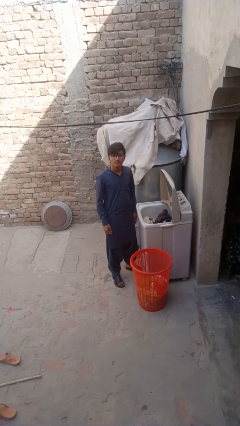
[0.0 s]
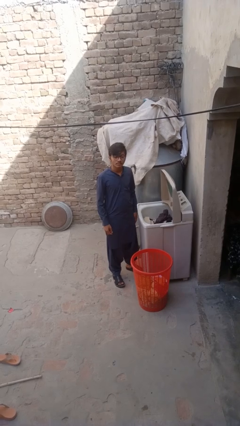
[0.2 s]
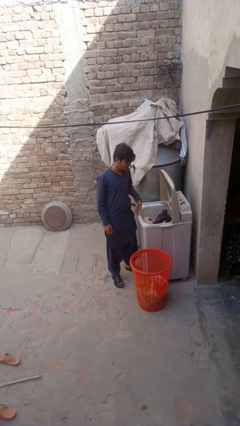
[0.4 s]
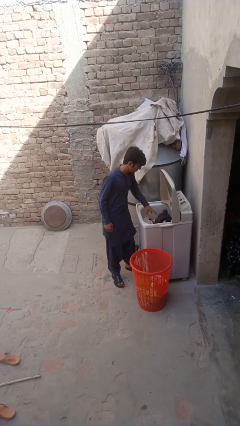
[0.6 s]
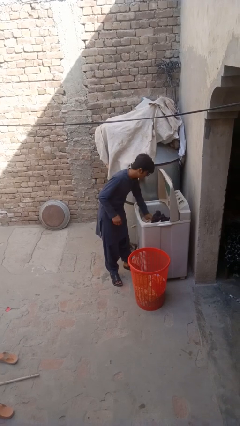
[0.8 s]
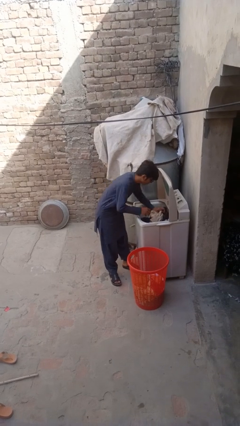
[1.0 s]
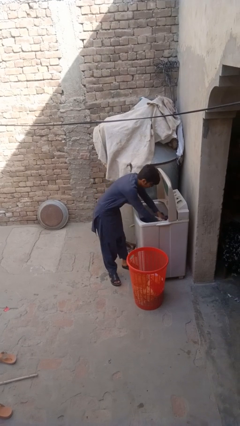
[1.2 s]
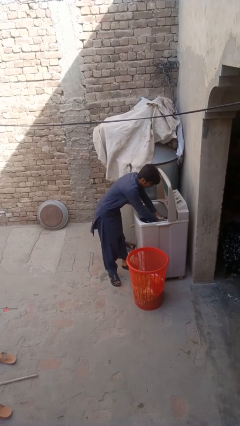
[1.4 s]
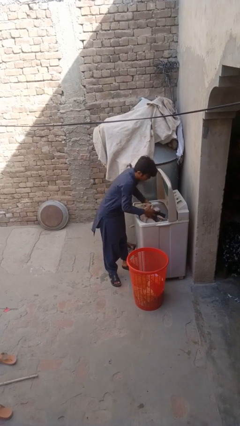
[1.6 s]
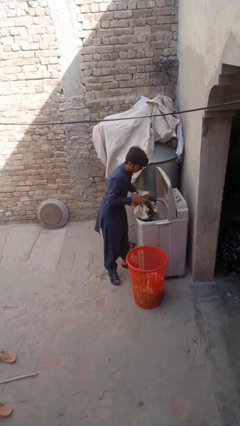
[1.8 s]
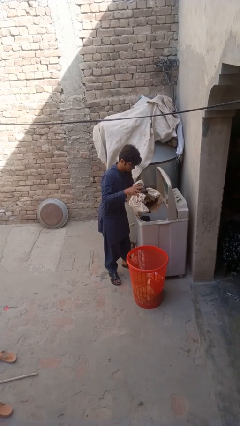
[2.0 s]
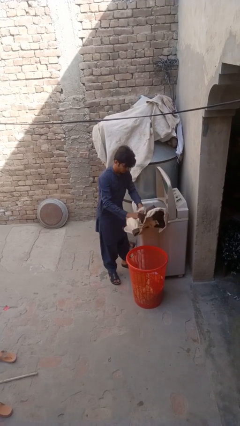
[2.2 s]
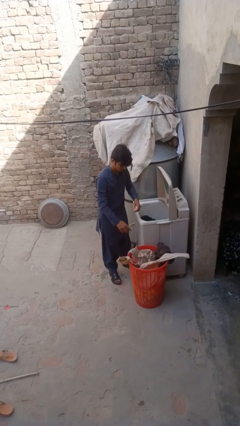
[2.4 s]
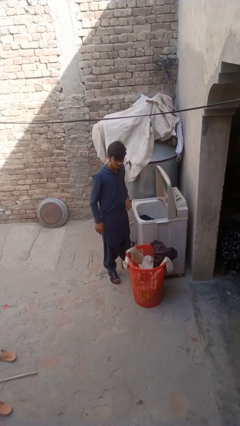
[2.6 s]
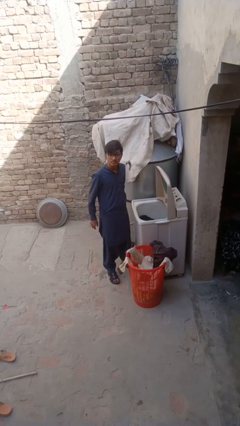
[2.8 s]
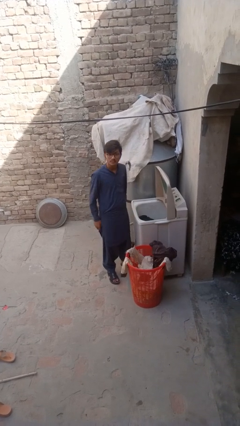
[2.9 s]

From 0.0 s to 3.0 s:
person unloads clotheswasher

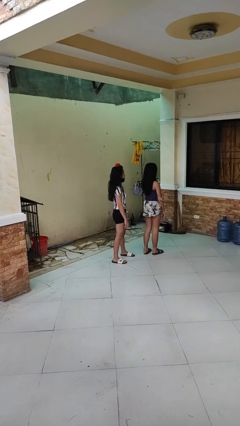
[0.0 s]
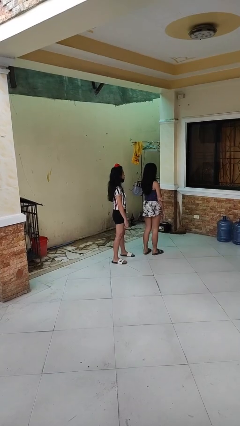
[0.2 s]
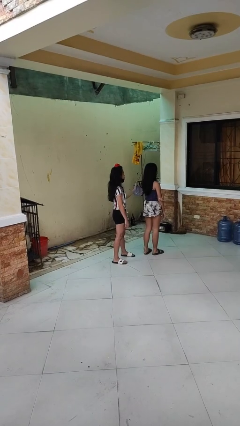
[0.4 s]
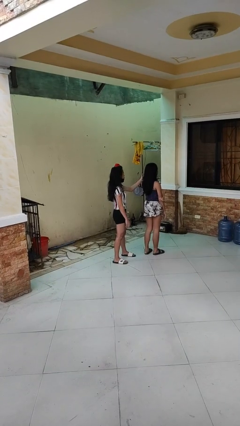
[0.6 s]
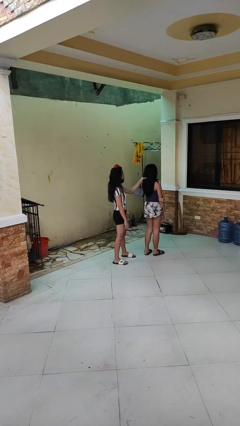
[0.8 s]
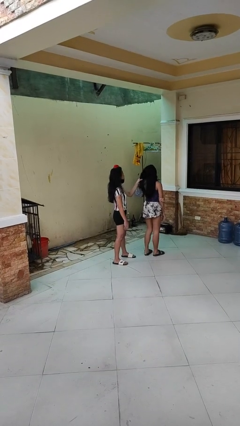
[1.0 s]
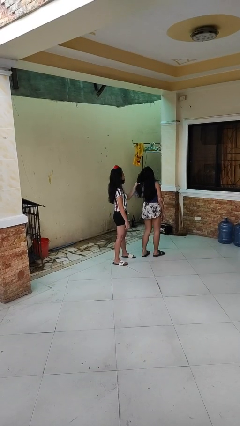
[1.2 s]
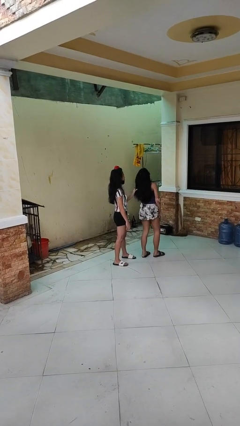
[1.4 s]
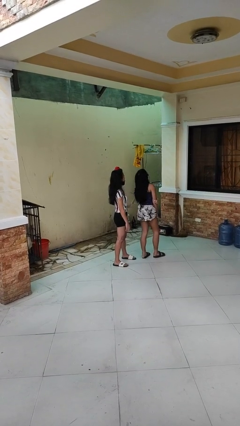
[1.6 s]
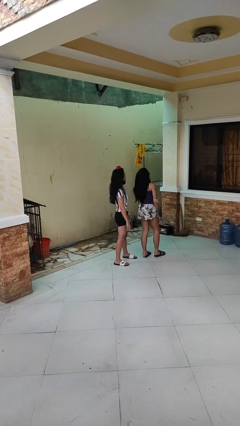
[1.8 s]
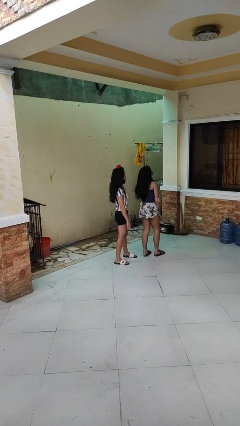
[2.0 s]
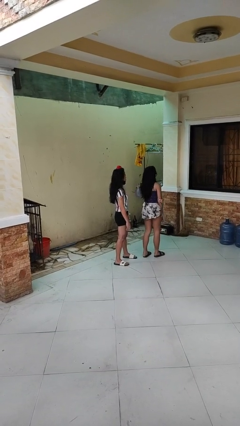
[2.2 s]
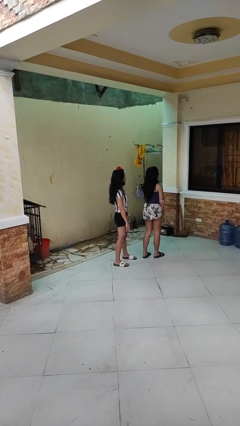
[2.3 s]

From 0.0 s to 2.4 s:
person grabs person by hair

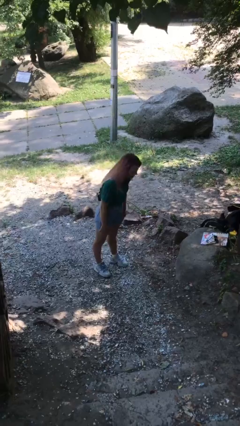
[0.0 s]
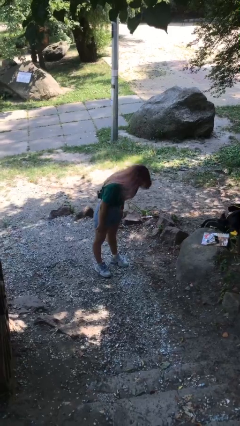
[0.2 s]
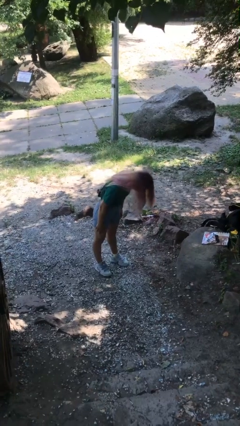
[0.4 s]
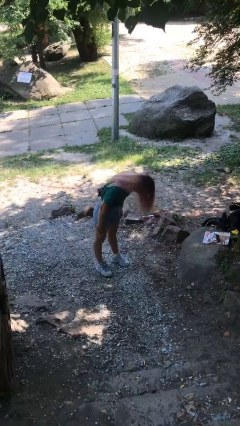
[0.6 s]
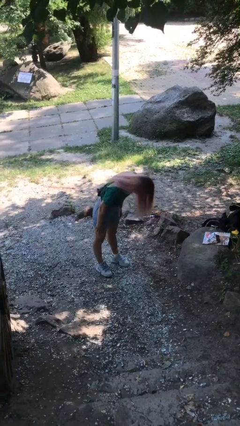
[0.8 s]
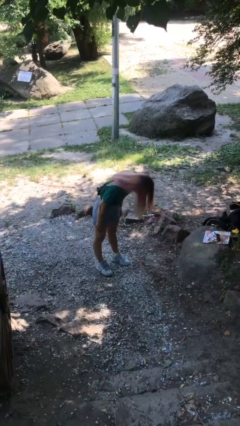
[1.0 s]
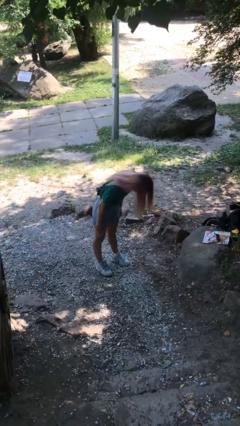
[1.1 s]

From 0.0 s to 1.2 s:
person bows

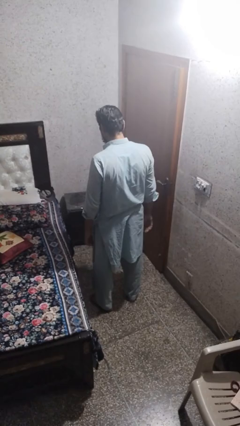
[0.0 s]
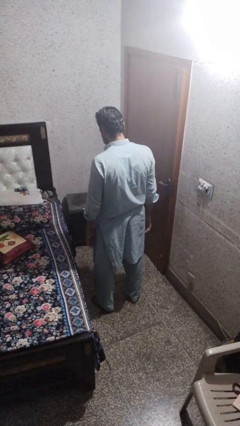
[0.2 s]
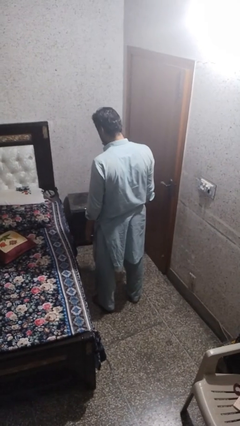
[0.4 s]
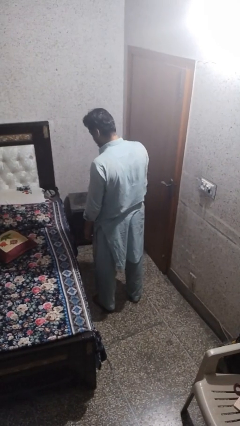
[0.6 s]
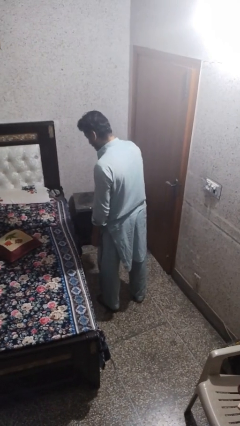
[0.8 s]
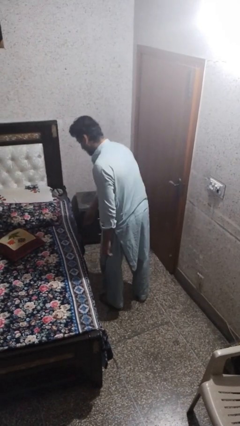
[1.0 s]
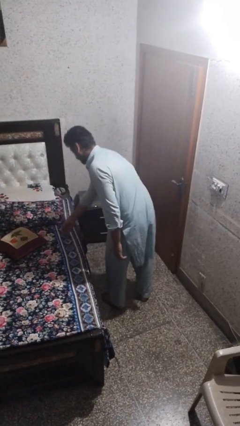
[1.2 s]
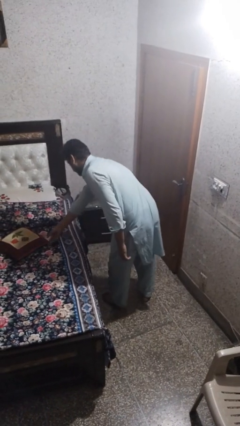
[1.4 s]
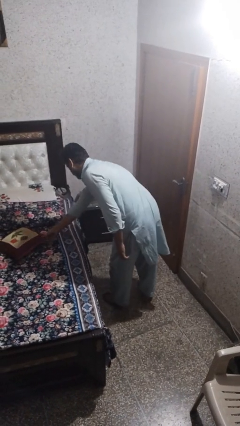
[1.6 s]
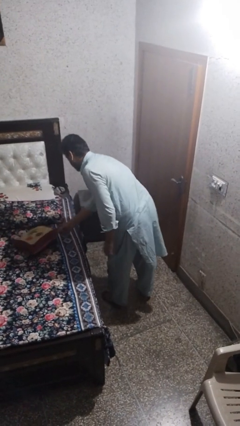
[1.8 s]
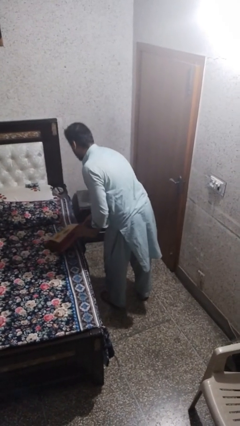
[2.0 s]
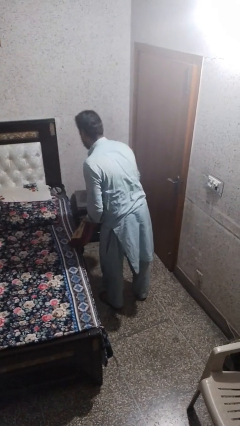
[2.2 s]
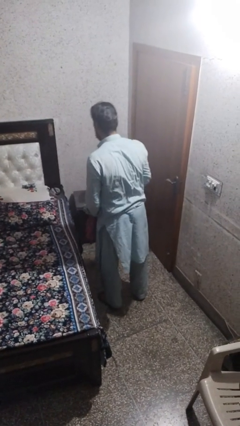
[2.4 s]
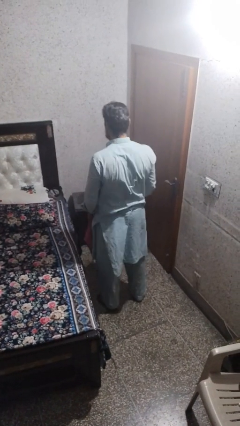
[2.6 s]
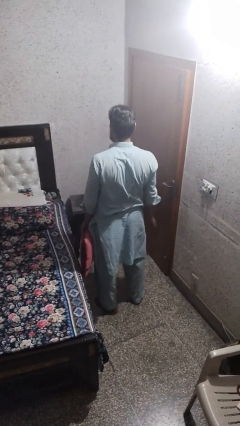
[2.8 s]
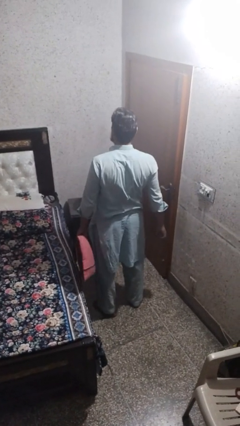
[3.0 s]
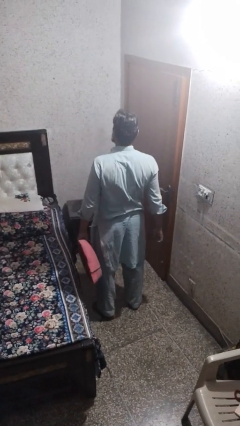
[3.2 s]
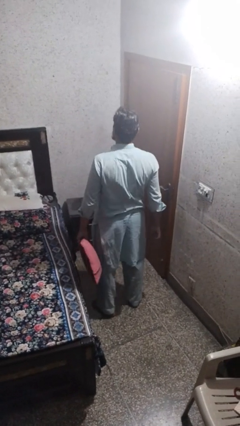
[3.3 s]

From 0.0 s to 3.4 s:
person picks up object from bed

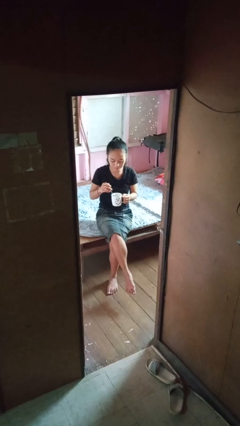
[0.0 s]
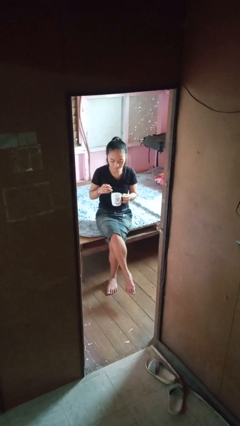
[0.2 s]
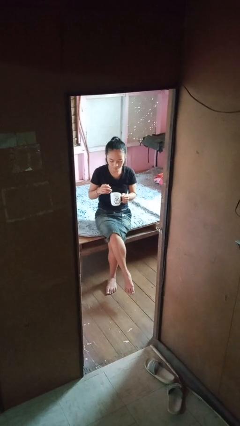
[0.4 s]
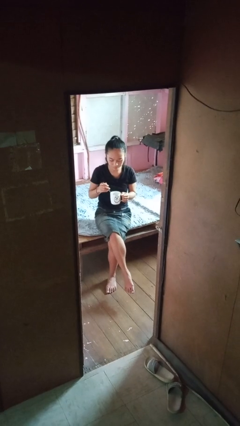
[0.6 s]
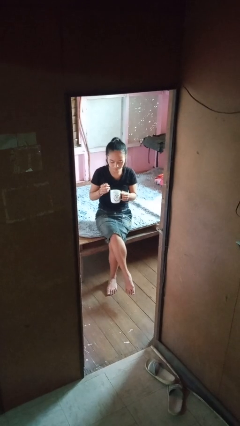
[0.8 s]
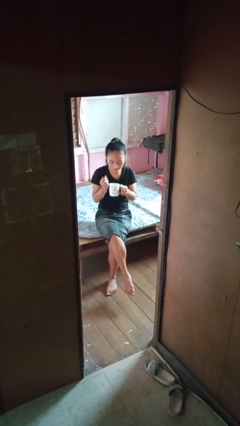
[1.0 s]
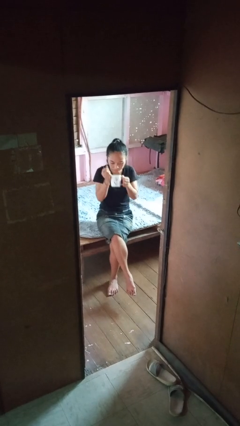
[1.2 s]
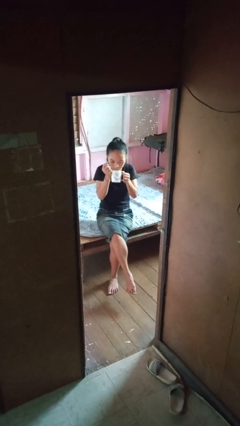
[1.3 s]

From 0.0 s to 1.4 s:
person stirs mug

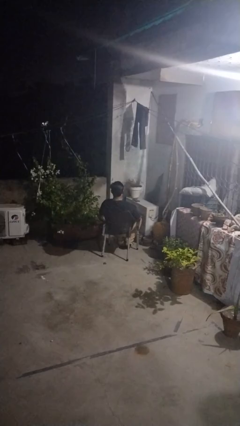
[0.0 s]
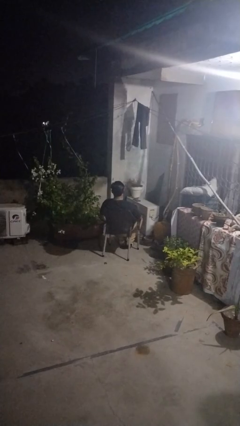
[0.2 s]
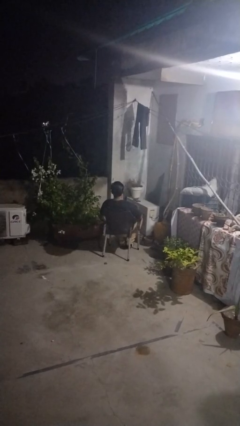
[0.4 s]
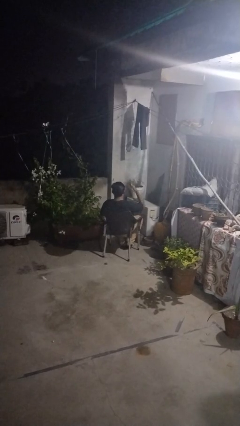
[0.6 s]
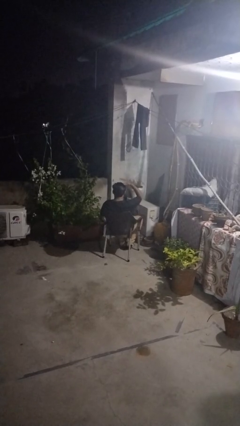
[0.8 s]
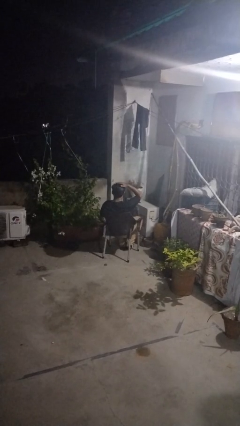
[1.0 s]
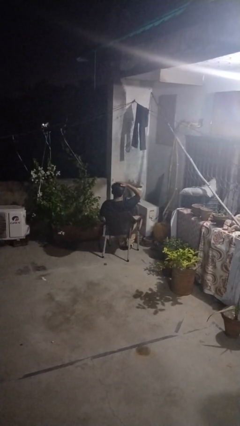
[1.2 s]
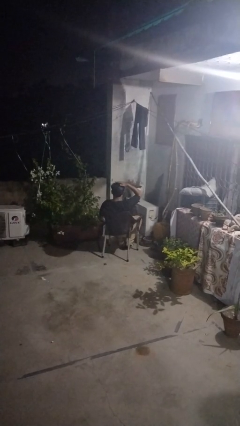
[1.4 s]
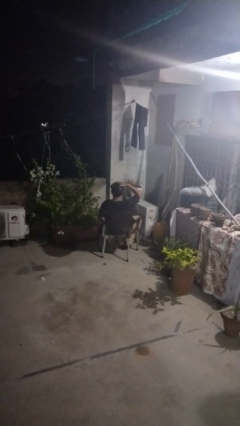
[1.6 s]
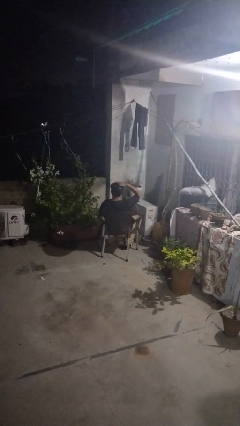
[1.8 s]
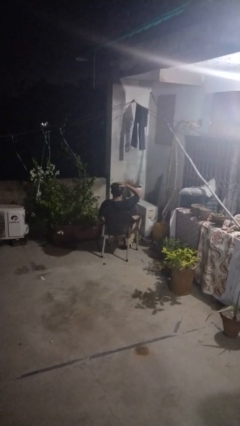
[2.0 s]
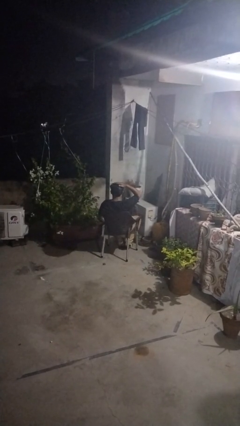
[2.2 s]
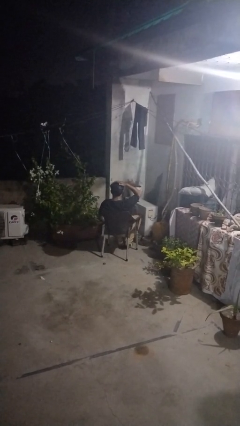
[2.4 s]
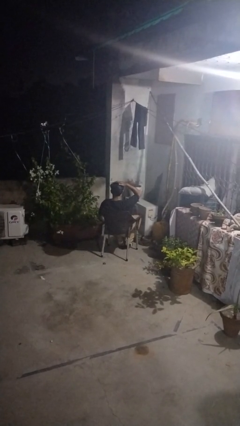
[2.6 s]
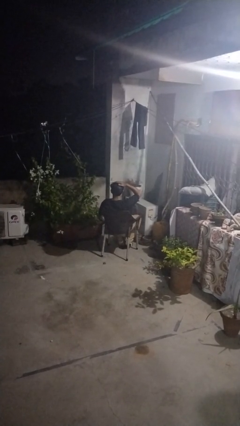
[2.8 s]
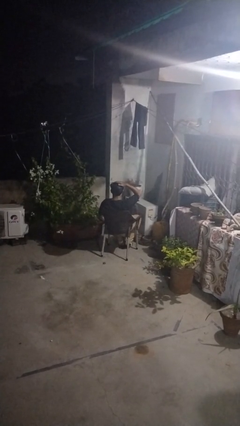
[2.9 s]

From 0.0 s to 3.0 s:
person pats head

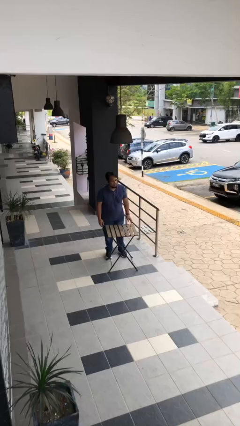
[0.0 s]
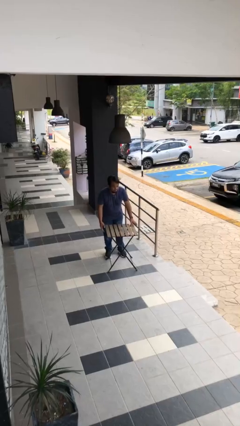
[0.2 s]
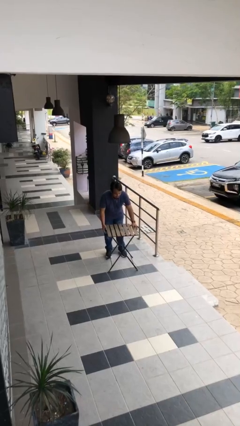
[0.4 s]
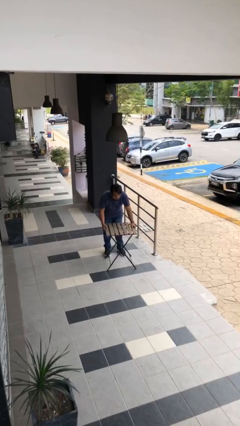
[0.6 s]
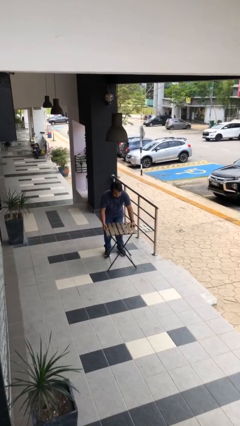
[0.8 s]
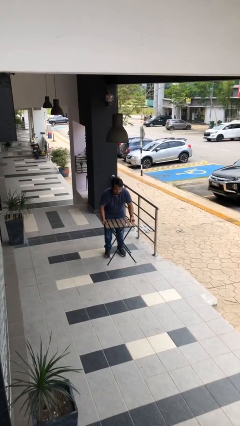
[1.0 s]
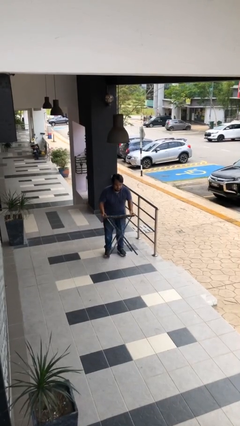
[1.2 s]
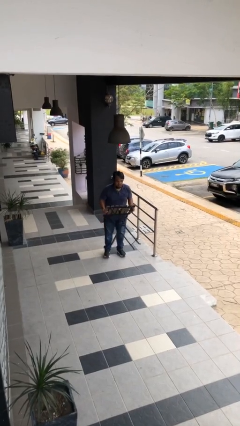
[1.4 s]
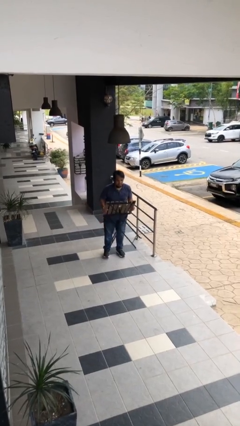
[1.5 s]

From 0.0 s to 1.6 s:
person picks up object from floor

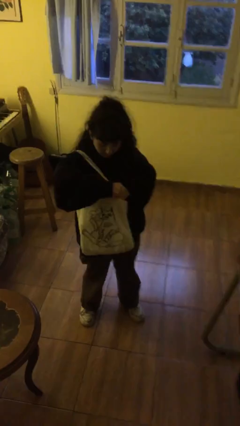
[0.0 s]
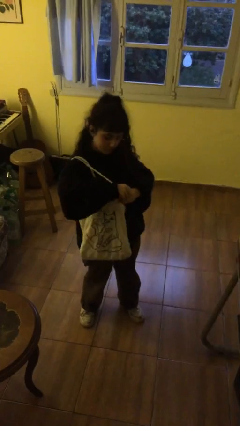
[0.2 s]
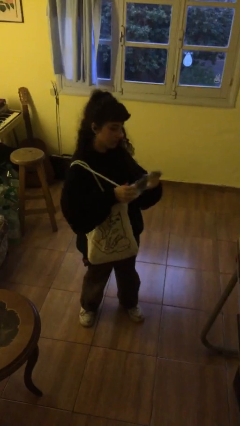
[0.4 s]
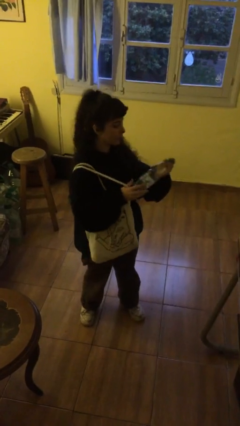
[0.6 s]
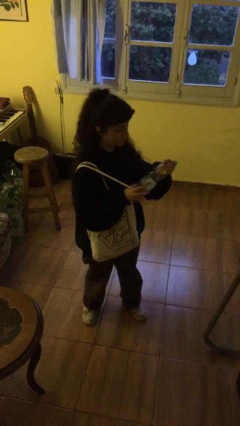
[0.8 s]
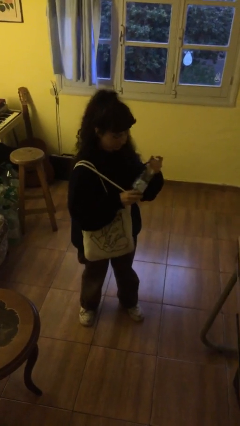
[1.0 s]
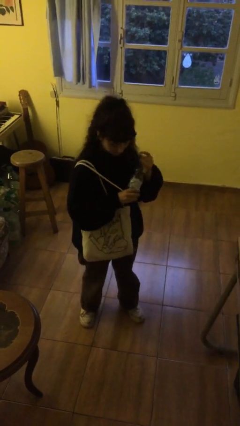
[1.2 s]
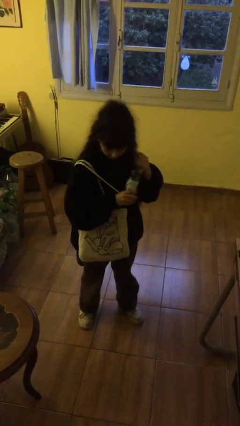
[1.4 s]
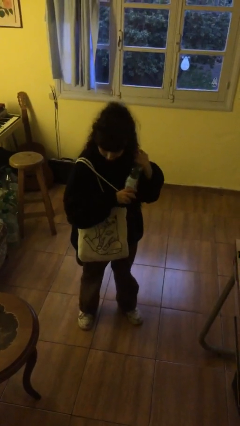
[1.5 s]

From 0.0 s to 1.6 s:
person takes object from purse
